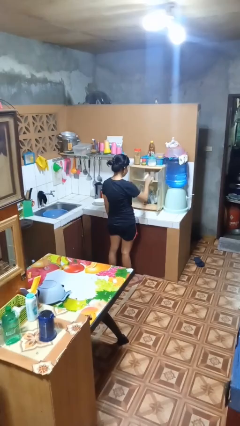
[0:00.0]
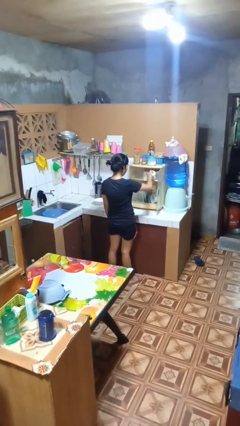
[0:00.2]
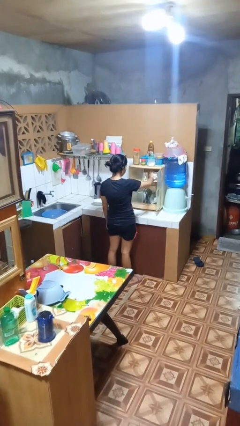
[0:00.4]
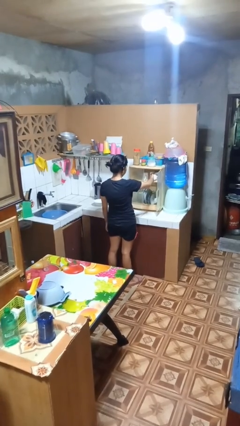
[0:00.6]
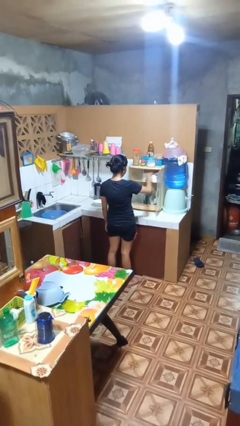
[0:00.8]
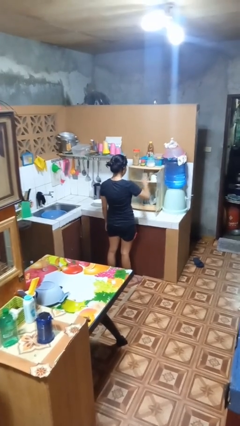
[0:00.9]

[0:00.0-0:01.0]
person puts object into kitchen drawer

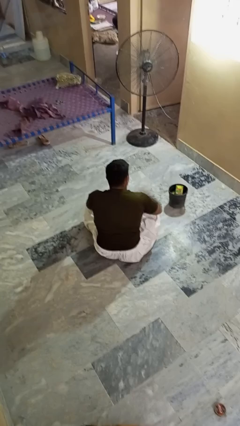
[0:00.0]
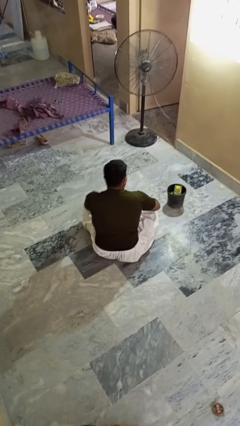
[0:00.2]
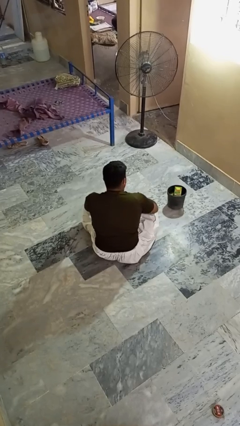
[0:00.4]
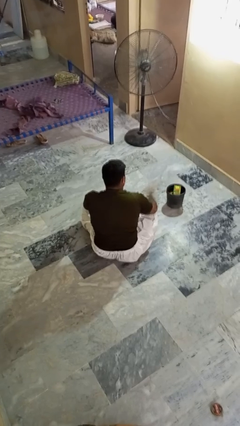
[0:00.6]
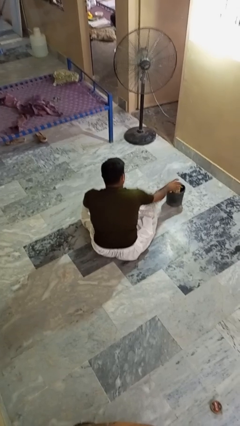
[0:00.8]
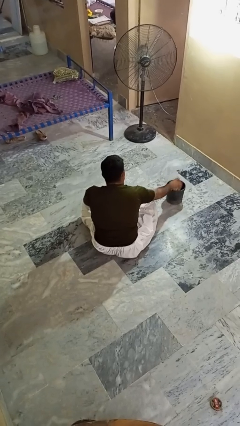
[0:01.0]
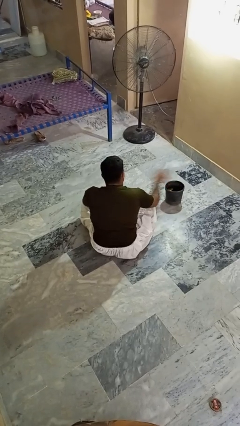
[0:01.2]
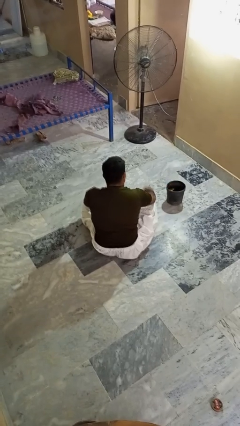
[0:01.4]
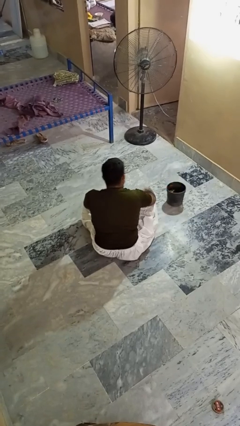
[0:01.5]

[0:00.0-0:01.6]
person takes object from basket

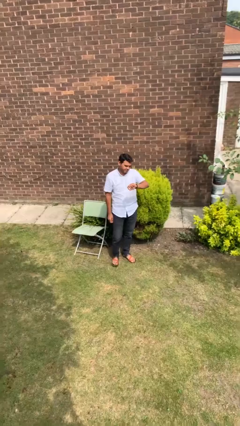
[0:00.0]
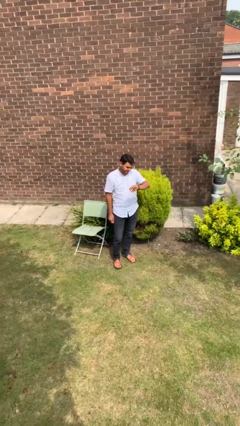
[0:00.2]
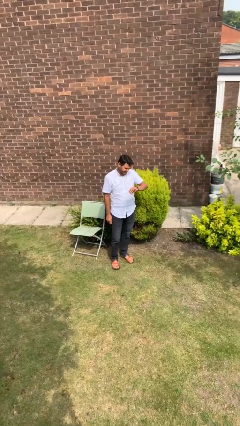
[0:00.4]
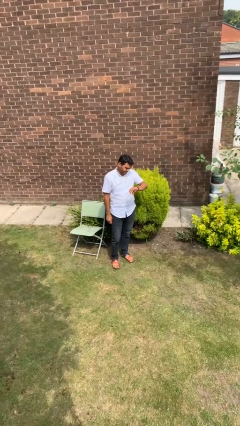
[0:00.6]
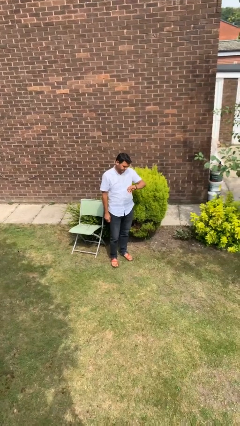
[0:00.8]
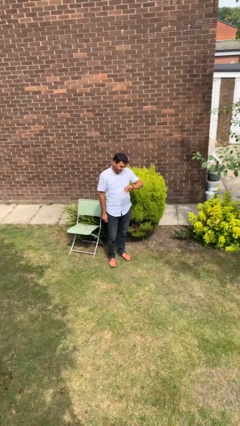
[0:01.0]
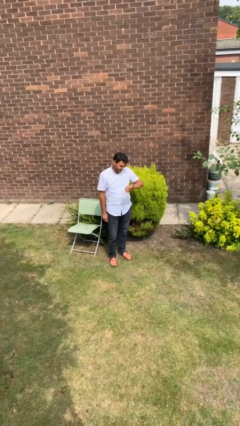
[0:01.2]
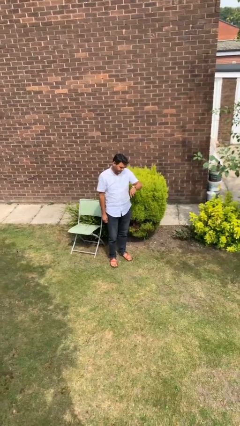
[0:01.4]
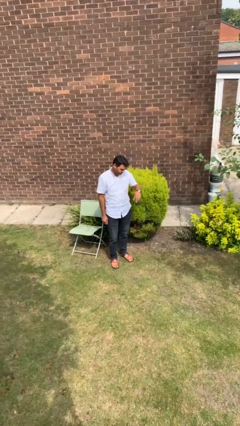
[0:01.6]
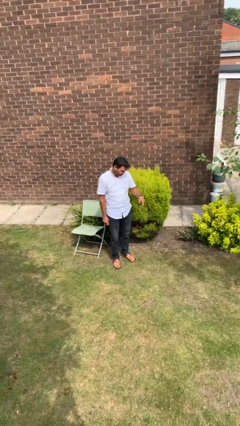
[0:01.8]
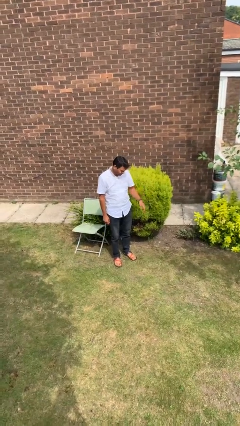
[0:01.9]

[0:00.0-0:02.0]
person looks at wristwatch

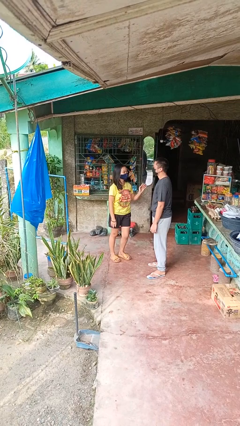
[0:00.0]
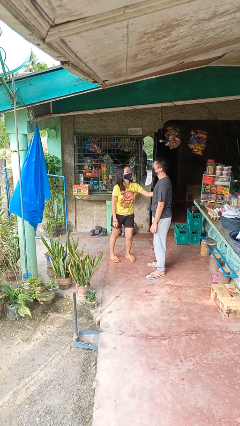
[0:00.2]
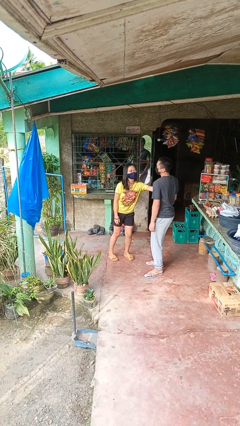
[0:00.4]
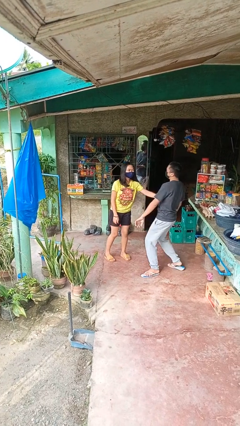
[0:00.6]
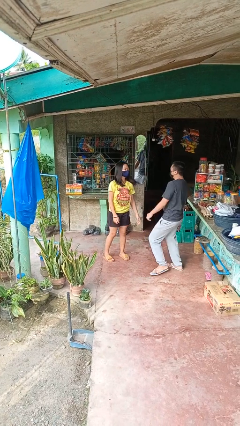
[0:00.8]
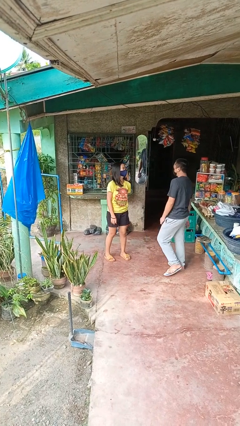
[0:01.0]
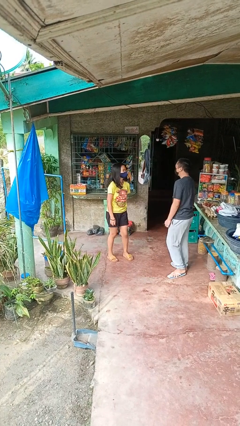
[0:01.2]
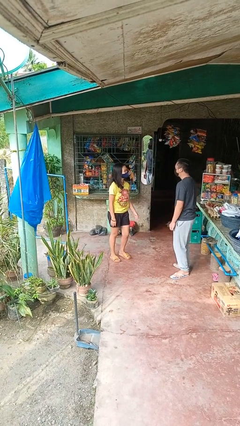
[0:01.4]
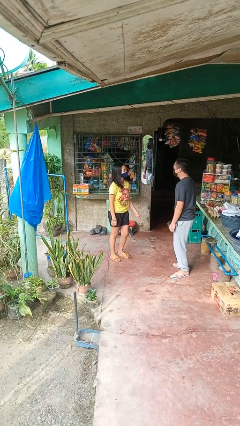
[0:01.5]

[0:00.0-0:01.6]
person shoves person

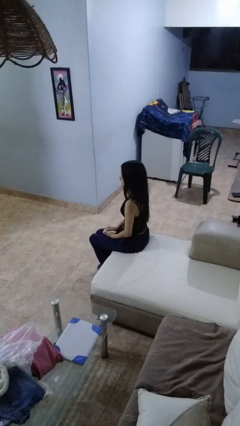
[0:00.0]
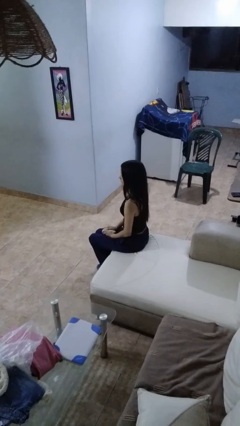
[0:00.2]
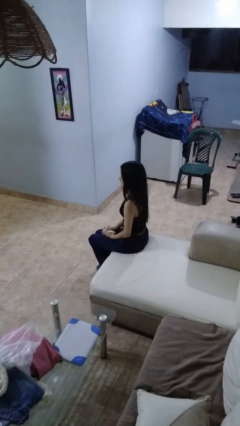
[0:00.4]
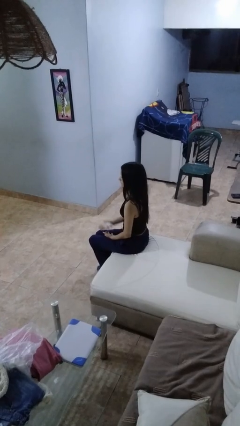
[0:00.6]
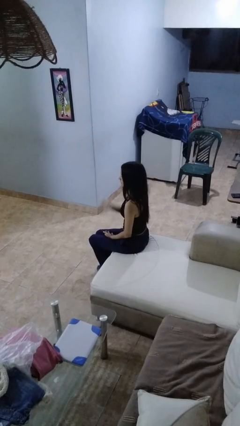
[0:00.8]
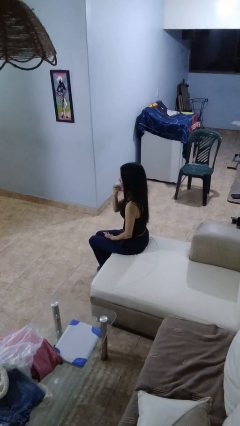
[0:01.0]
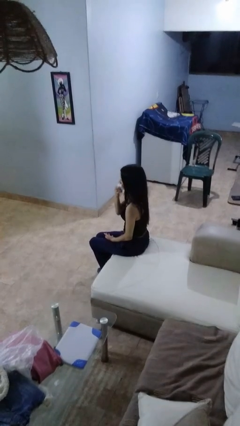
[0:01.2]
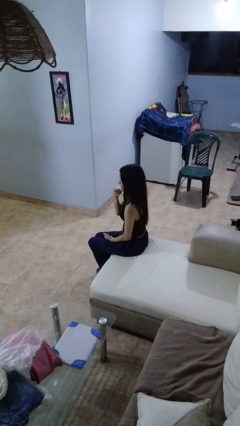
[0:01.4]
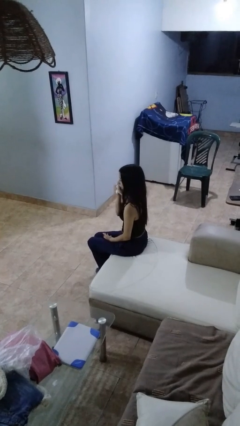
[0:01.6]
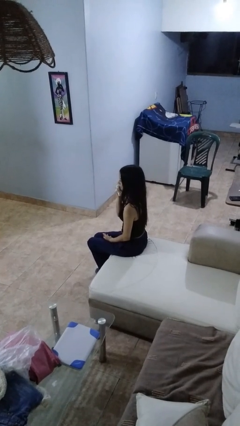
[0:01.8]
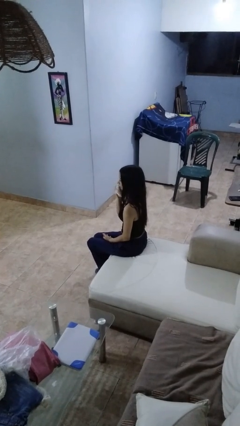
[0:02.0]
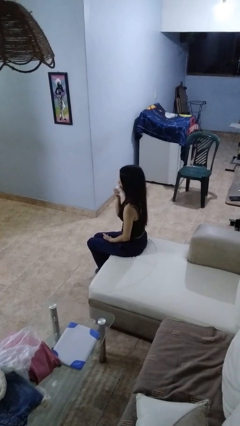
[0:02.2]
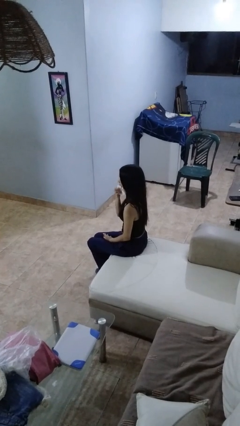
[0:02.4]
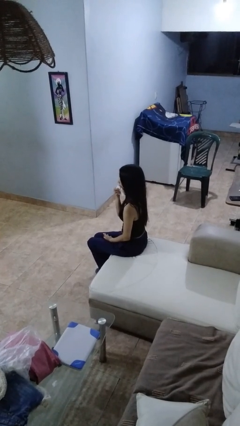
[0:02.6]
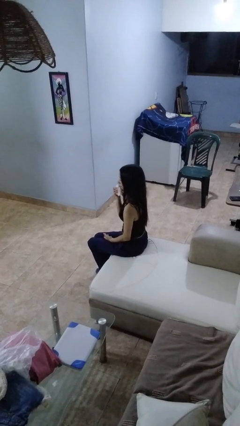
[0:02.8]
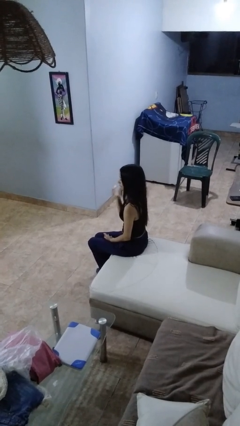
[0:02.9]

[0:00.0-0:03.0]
person wipes mouth with napkin

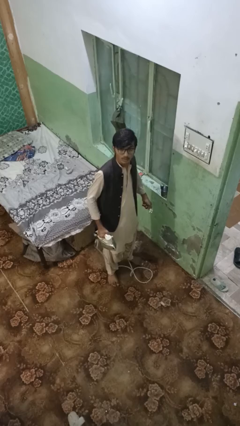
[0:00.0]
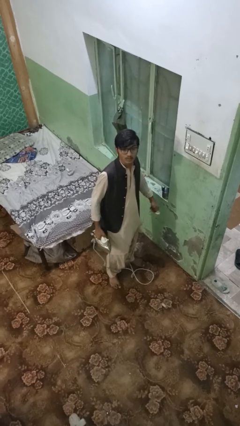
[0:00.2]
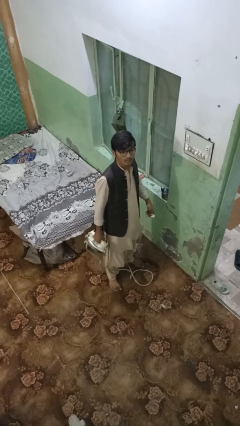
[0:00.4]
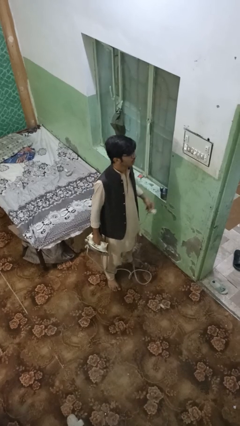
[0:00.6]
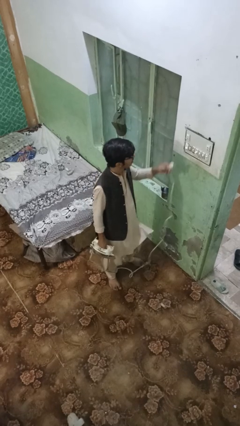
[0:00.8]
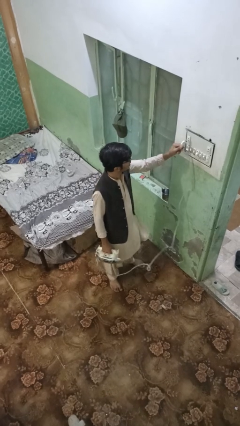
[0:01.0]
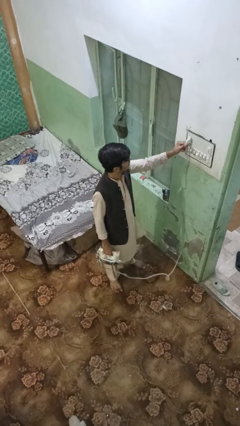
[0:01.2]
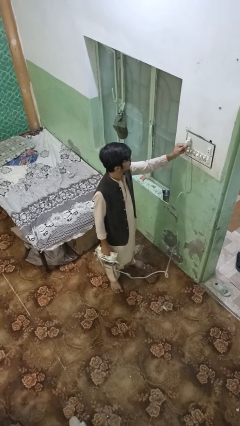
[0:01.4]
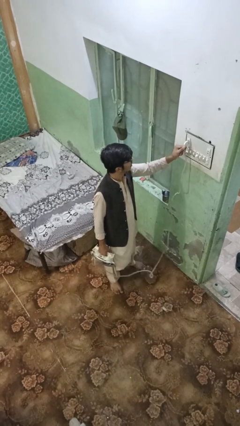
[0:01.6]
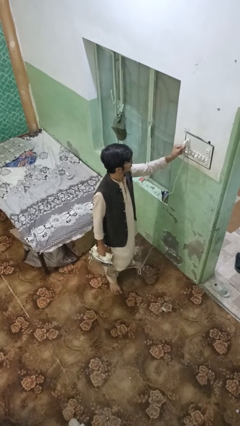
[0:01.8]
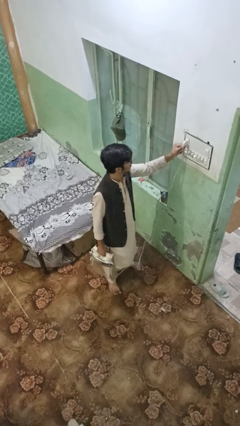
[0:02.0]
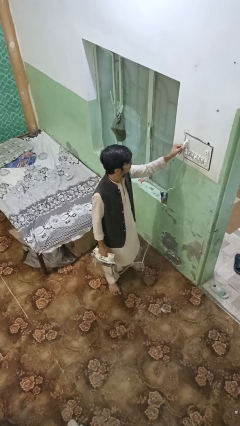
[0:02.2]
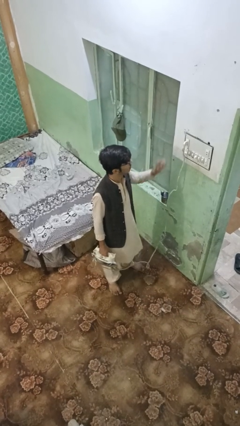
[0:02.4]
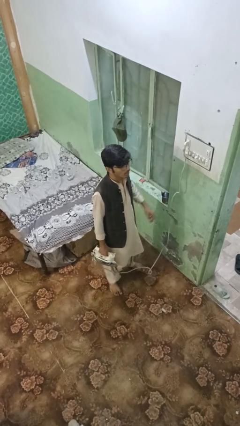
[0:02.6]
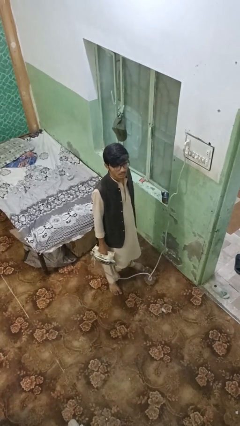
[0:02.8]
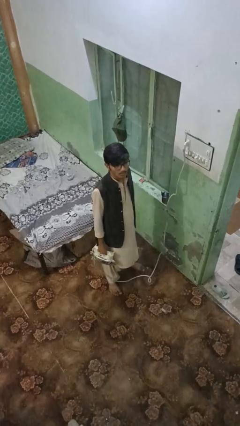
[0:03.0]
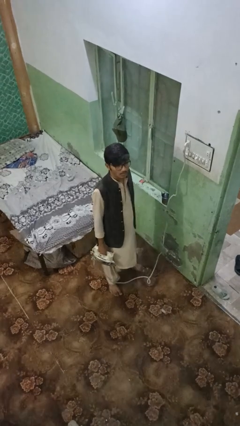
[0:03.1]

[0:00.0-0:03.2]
person plugs into electrical socket

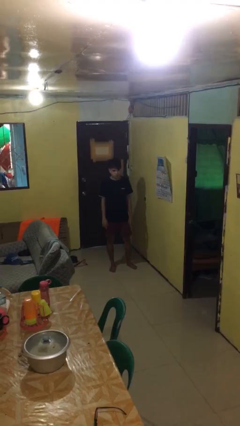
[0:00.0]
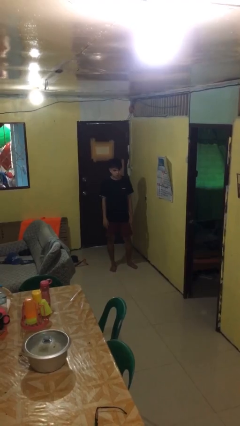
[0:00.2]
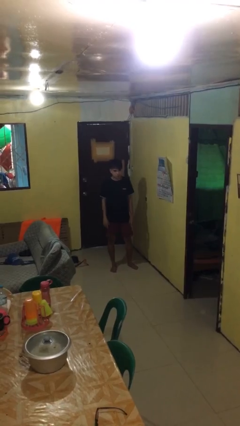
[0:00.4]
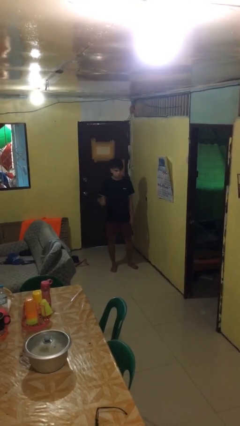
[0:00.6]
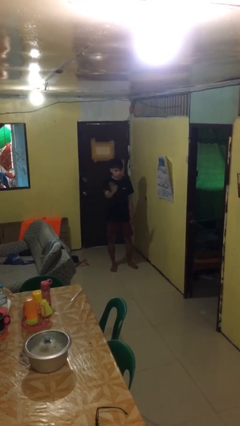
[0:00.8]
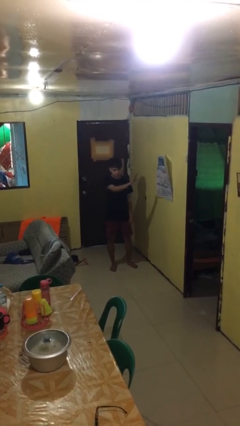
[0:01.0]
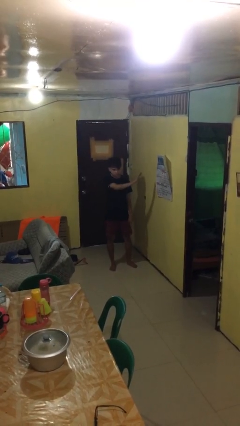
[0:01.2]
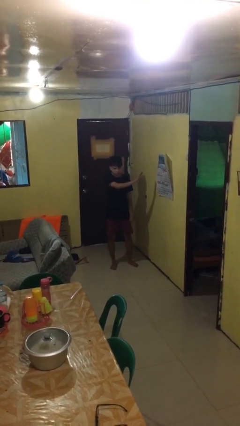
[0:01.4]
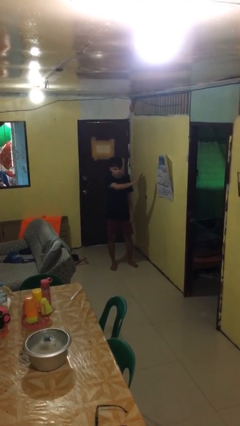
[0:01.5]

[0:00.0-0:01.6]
person gestures swipe left

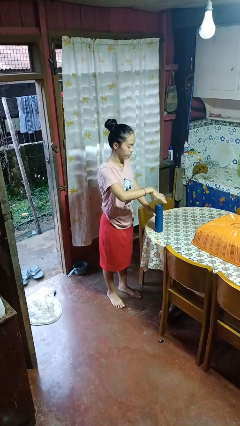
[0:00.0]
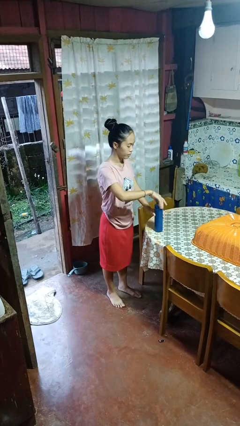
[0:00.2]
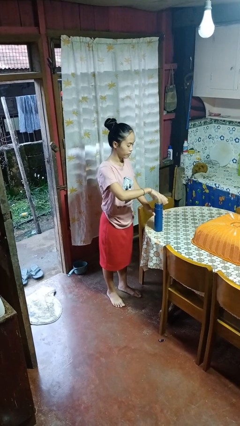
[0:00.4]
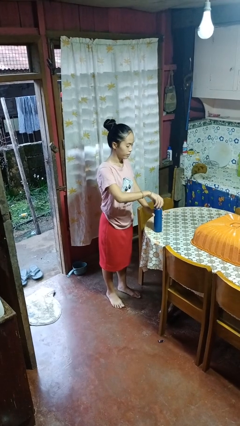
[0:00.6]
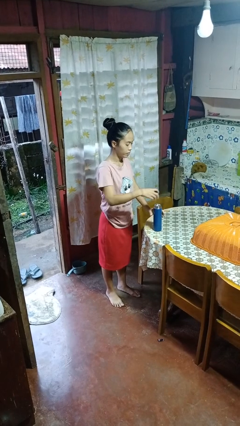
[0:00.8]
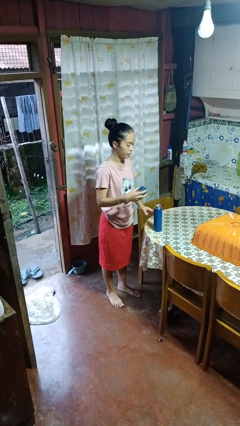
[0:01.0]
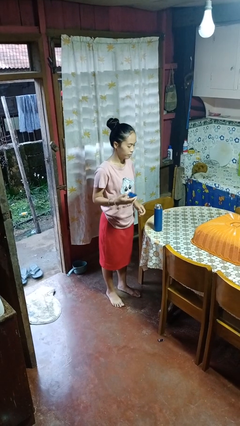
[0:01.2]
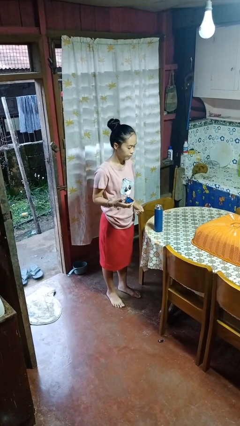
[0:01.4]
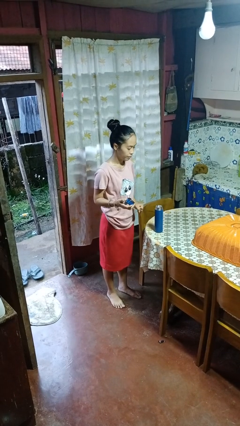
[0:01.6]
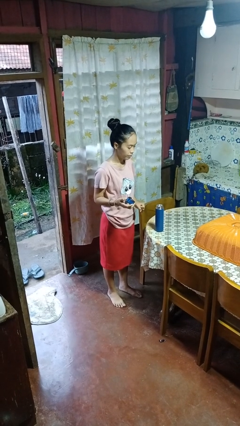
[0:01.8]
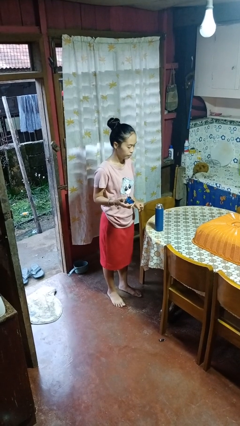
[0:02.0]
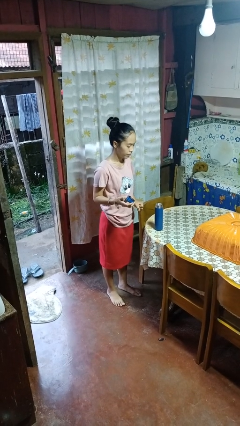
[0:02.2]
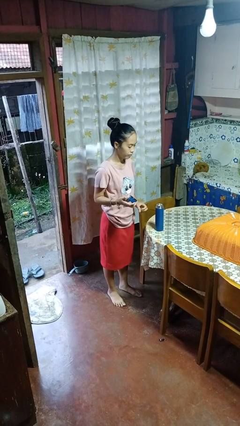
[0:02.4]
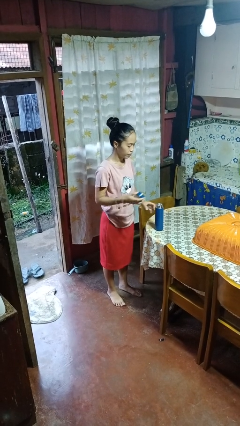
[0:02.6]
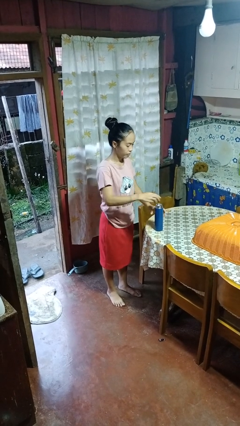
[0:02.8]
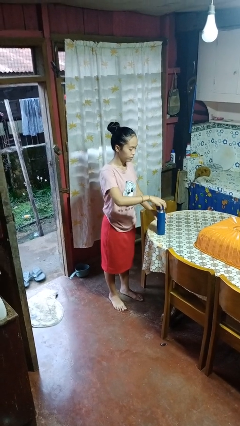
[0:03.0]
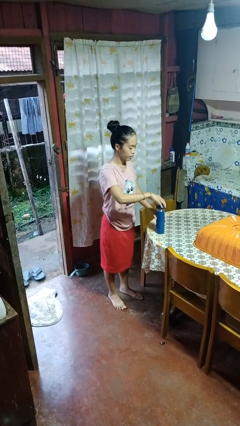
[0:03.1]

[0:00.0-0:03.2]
person opens jar
